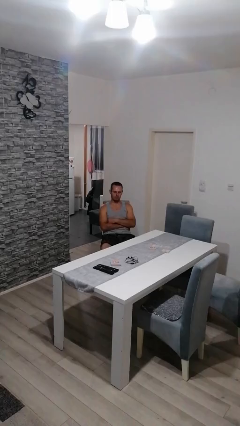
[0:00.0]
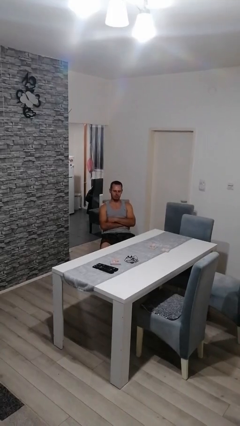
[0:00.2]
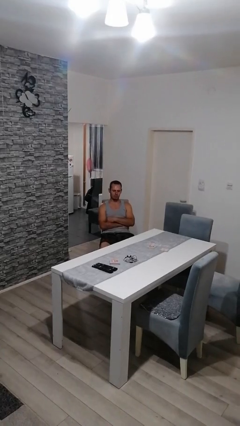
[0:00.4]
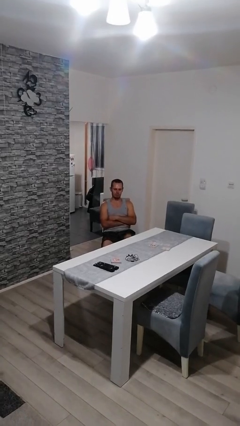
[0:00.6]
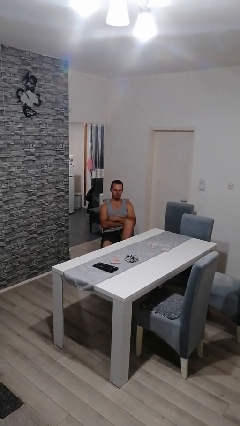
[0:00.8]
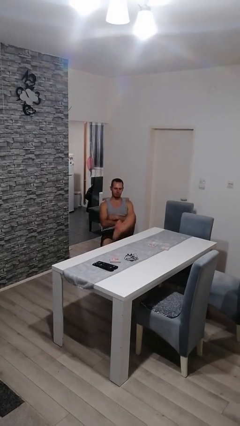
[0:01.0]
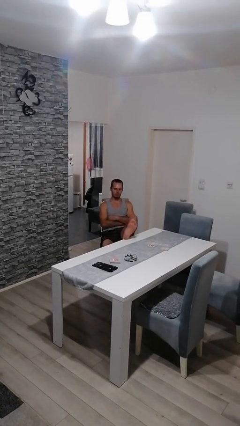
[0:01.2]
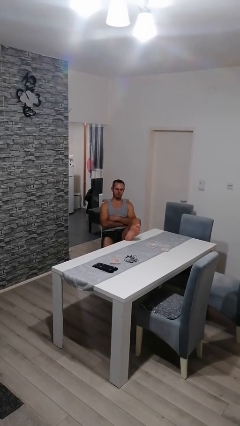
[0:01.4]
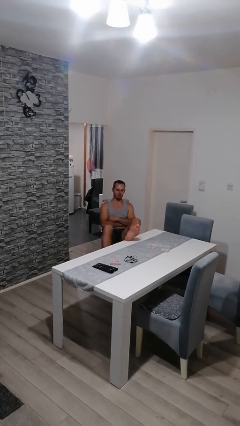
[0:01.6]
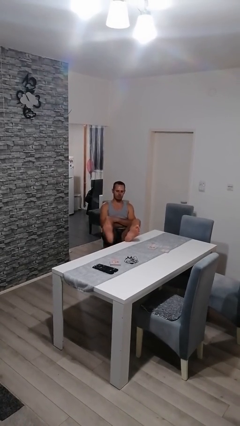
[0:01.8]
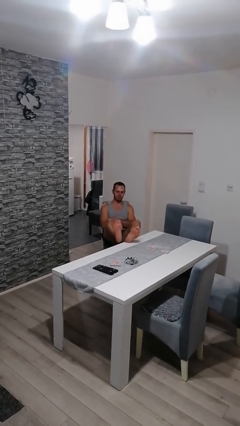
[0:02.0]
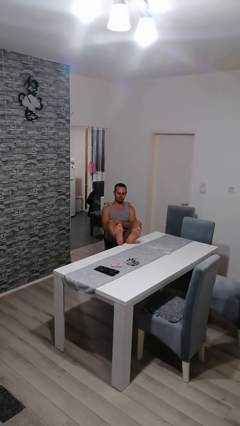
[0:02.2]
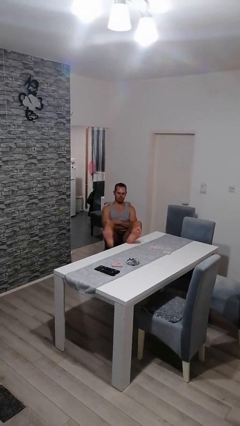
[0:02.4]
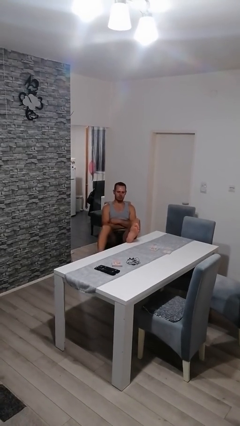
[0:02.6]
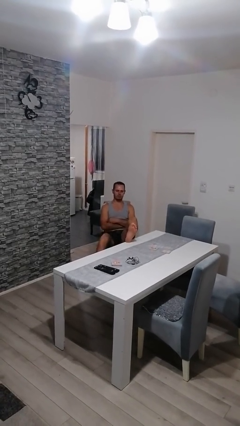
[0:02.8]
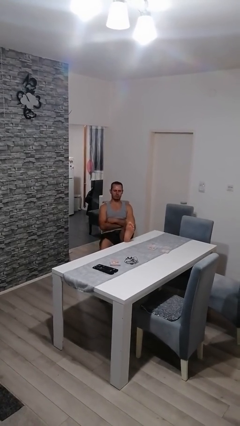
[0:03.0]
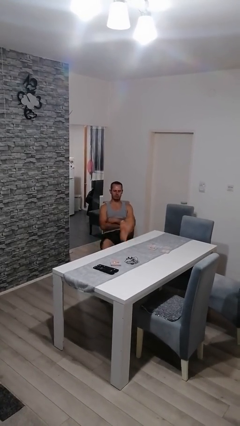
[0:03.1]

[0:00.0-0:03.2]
person puts feet up

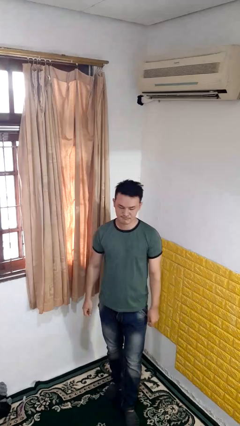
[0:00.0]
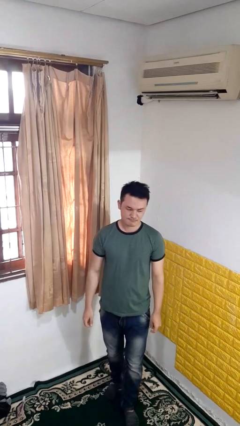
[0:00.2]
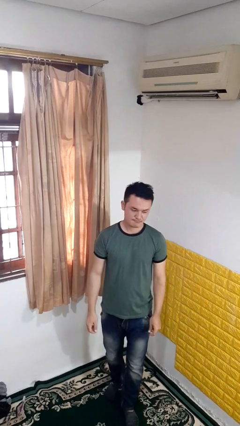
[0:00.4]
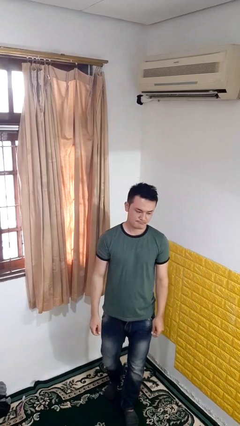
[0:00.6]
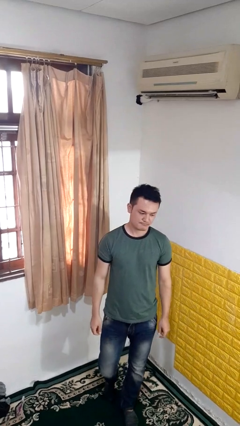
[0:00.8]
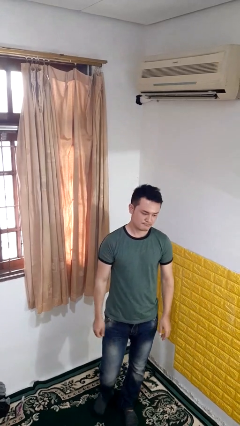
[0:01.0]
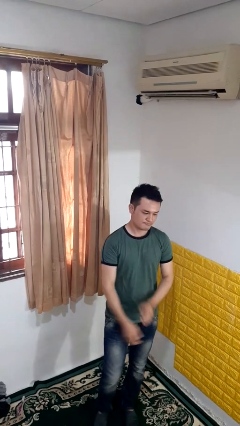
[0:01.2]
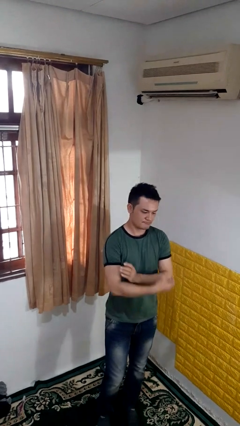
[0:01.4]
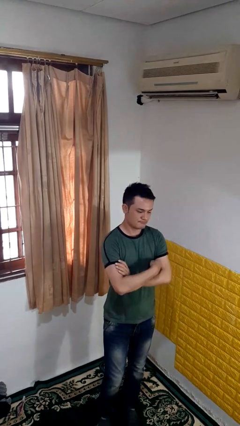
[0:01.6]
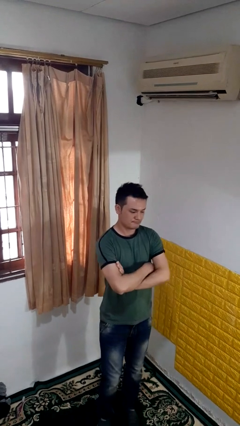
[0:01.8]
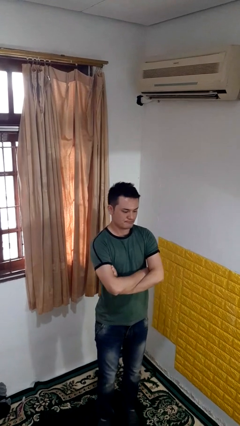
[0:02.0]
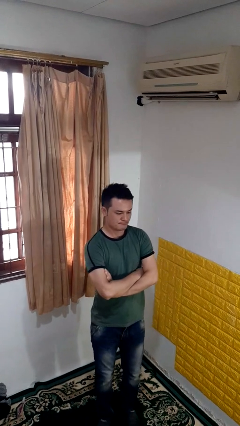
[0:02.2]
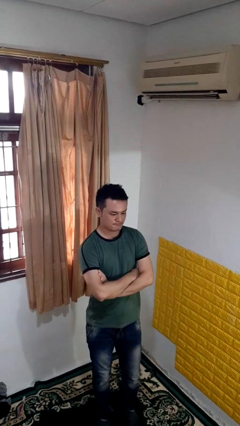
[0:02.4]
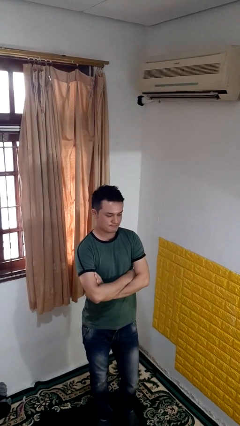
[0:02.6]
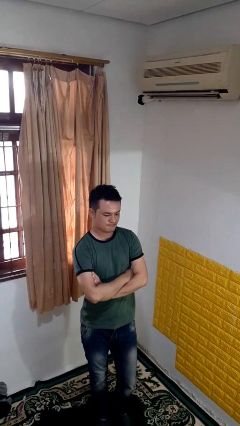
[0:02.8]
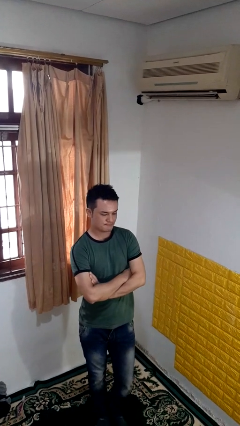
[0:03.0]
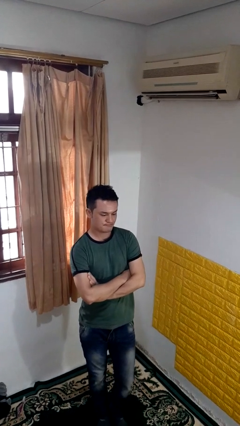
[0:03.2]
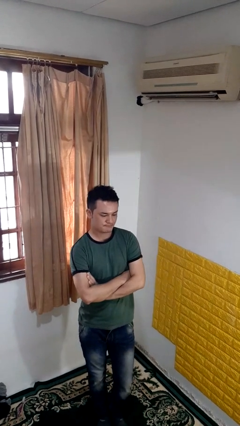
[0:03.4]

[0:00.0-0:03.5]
person crosses arms

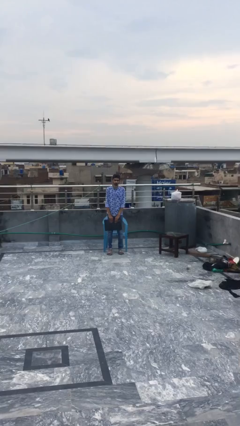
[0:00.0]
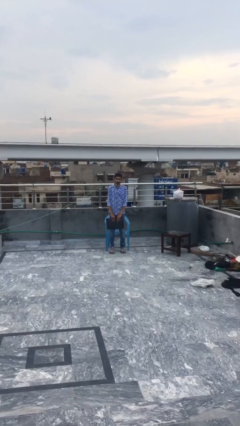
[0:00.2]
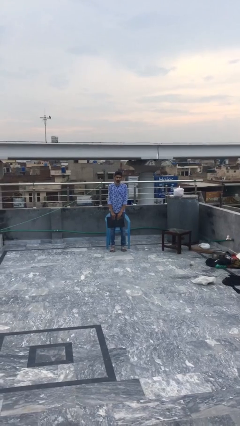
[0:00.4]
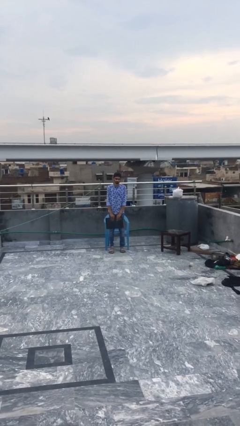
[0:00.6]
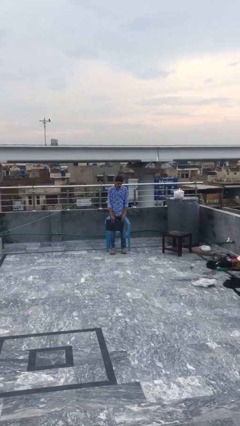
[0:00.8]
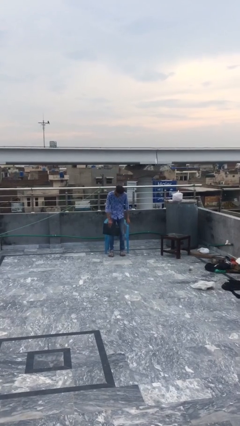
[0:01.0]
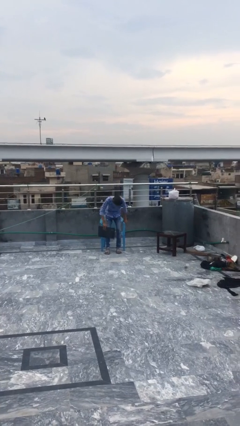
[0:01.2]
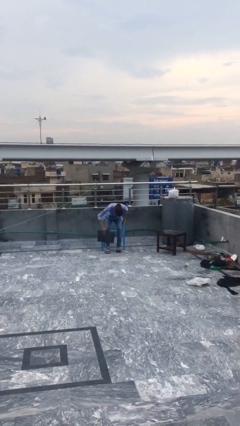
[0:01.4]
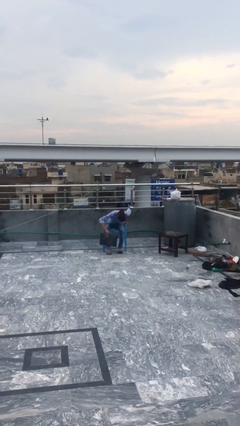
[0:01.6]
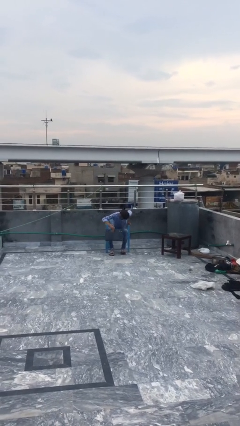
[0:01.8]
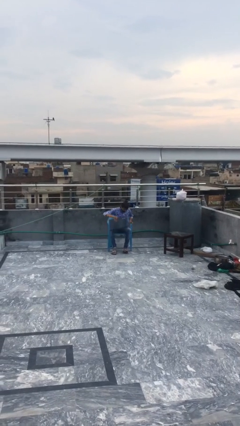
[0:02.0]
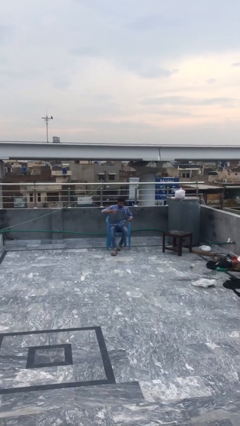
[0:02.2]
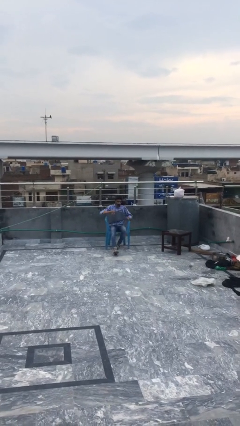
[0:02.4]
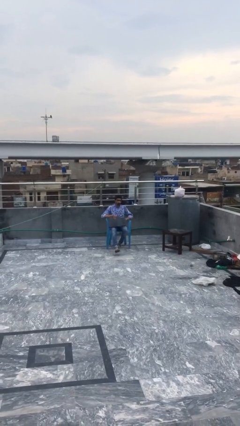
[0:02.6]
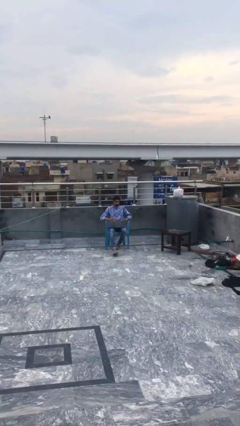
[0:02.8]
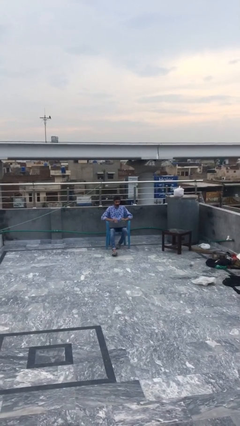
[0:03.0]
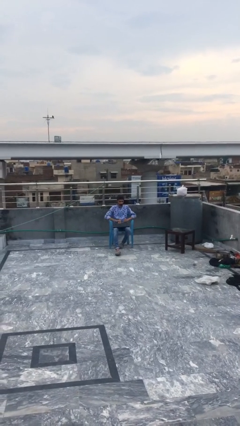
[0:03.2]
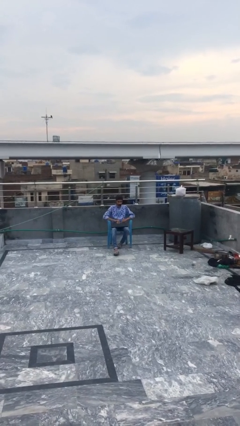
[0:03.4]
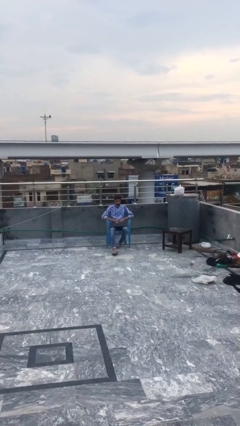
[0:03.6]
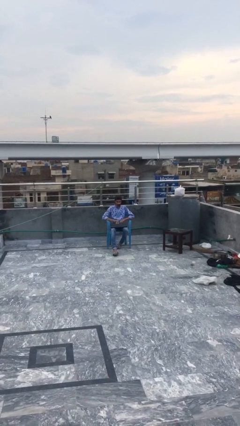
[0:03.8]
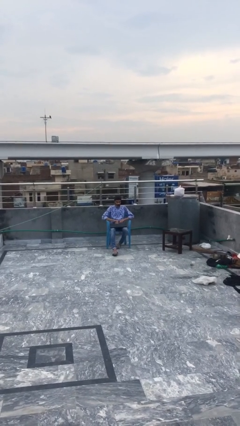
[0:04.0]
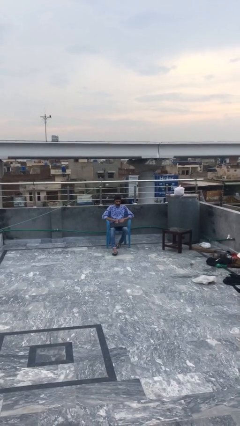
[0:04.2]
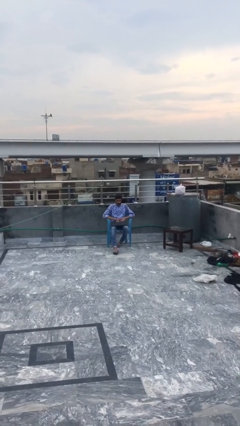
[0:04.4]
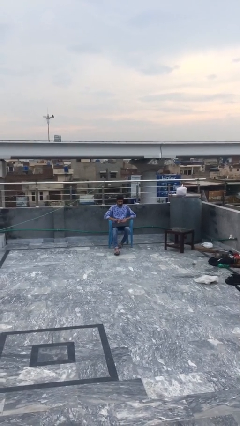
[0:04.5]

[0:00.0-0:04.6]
person sits down

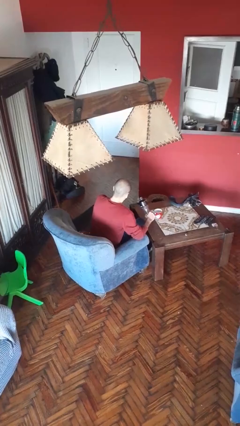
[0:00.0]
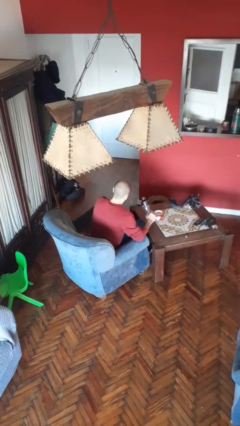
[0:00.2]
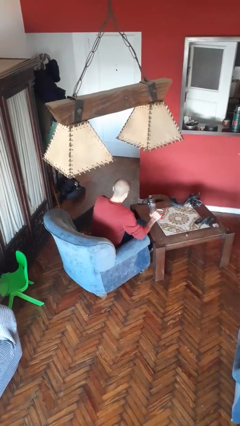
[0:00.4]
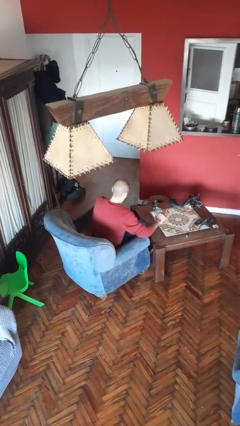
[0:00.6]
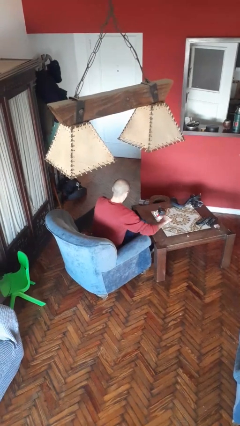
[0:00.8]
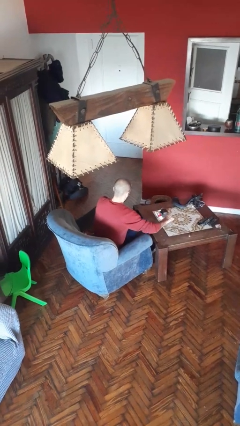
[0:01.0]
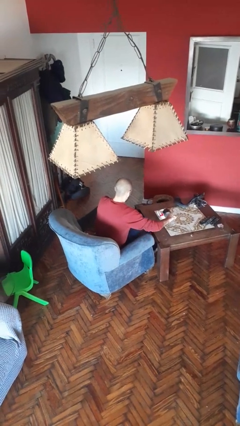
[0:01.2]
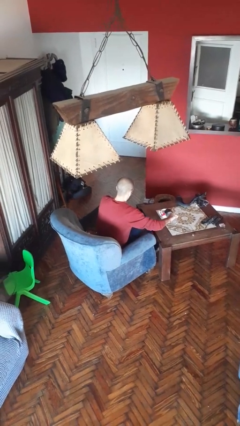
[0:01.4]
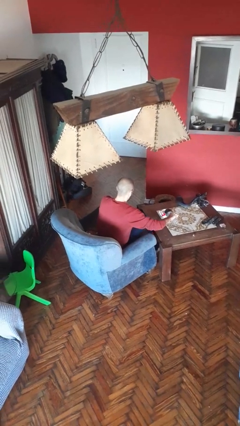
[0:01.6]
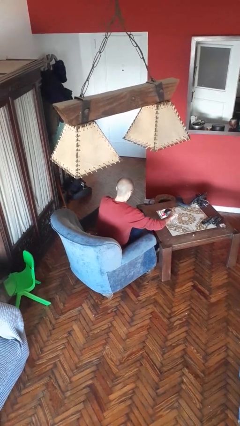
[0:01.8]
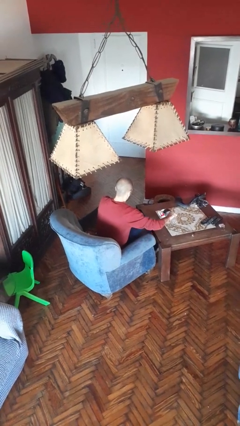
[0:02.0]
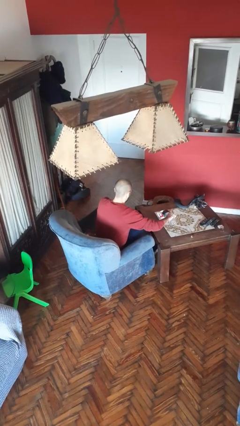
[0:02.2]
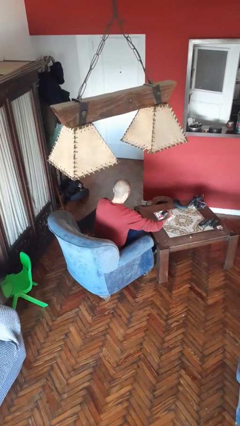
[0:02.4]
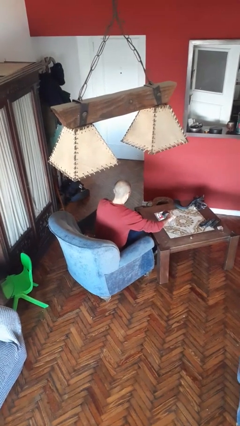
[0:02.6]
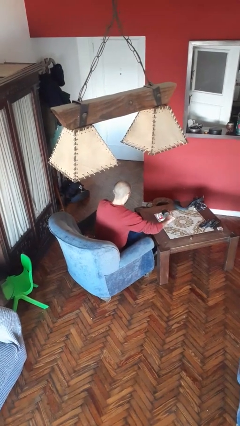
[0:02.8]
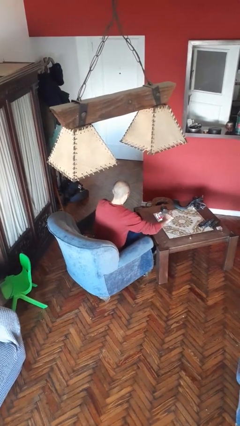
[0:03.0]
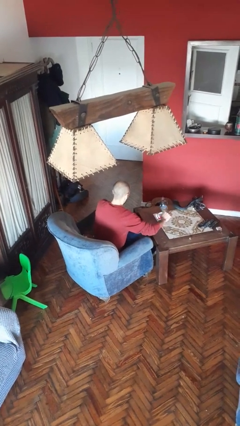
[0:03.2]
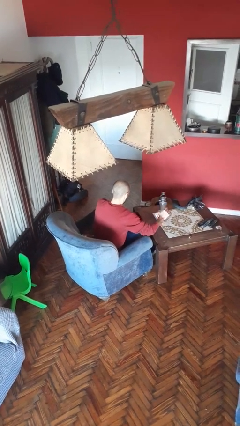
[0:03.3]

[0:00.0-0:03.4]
person pours liquid into cup

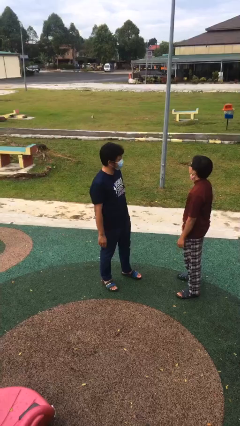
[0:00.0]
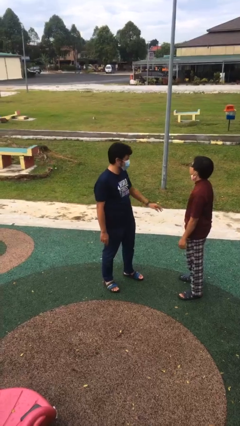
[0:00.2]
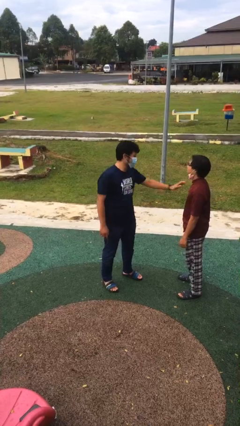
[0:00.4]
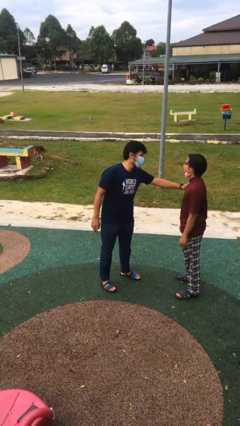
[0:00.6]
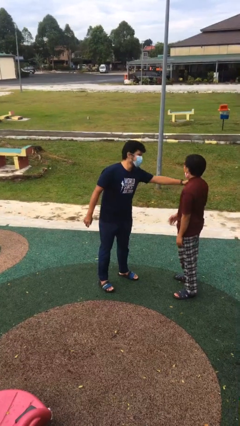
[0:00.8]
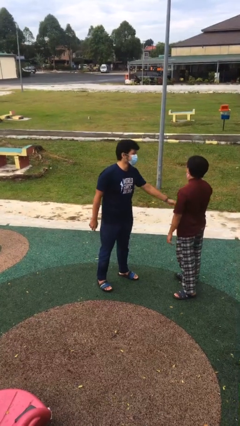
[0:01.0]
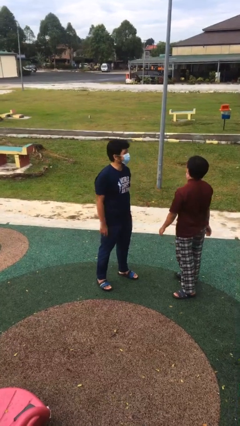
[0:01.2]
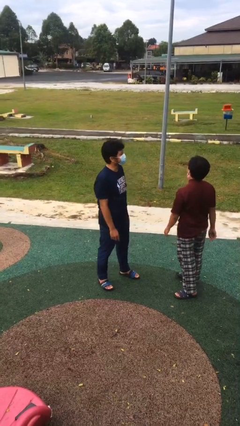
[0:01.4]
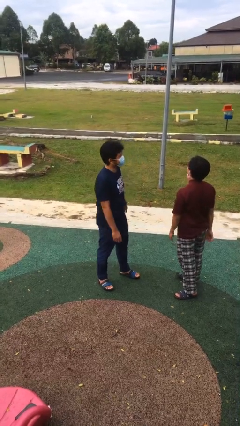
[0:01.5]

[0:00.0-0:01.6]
person shoves person

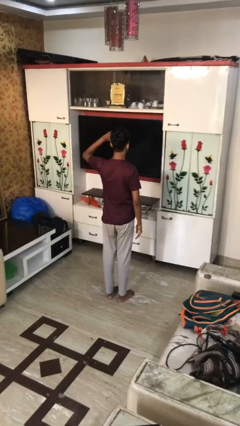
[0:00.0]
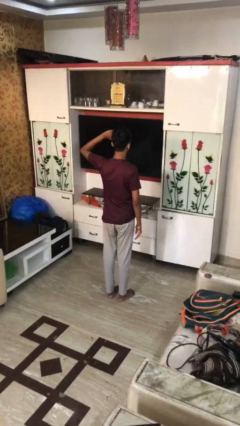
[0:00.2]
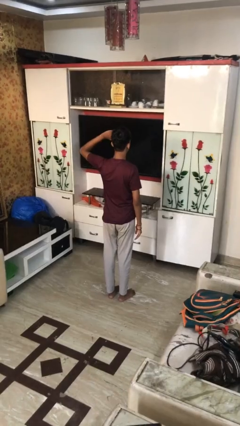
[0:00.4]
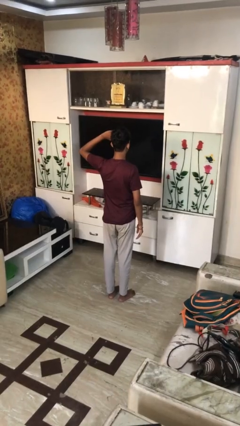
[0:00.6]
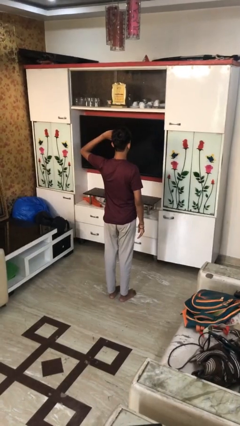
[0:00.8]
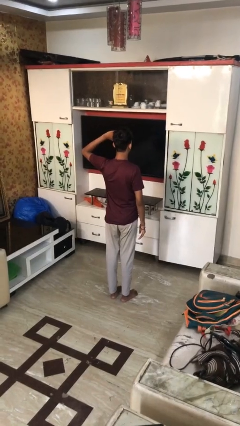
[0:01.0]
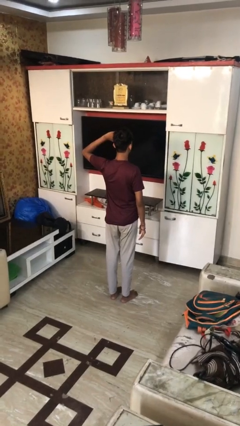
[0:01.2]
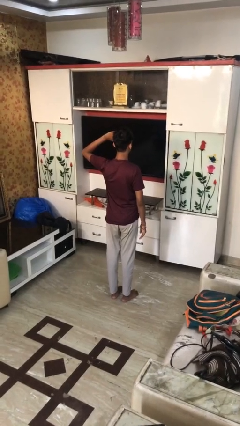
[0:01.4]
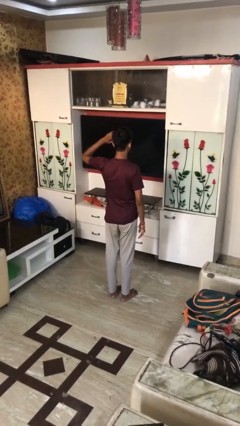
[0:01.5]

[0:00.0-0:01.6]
person salutes
